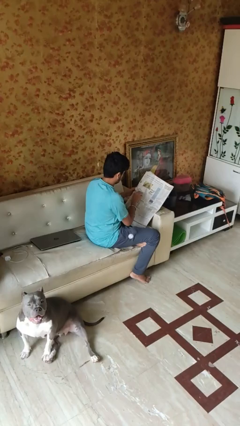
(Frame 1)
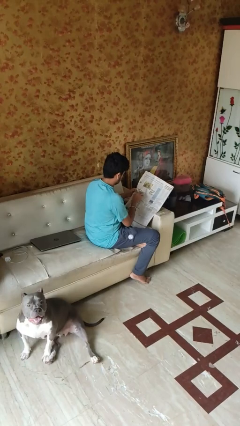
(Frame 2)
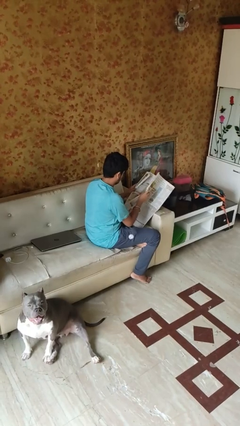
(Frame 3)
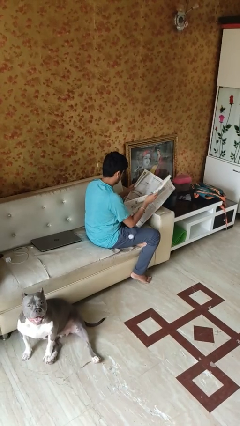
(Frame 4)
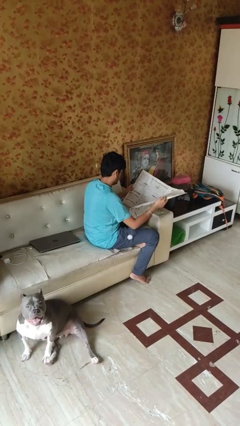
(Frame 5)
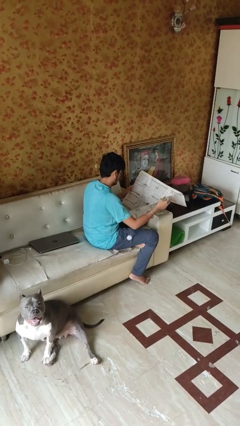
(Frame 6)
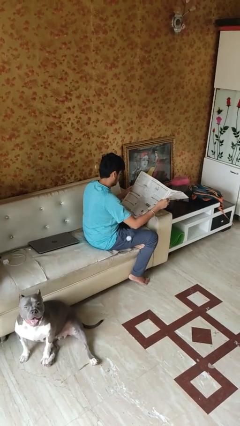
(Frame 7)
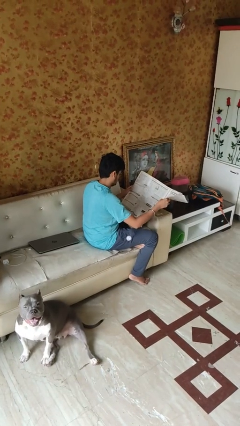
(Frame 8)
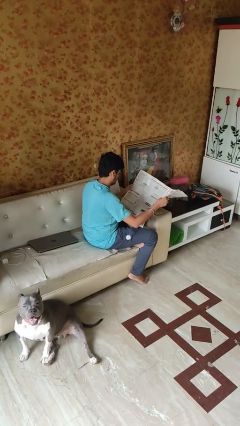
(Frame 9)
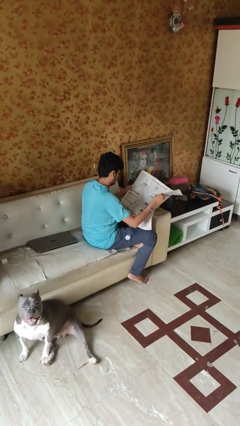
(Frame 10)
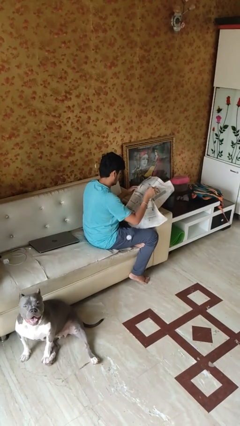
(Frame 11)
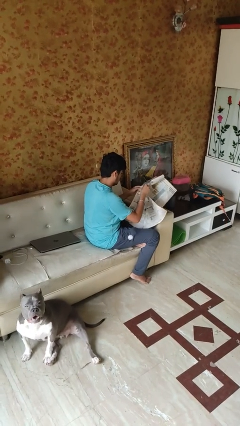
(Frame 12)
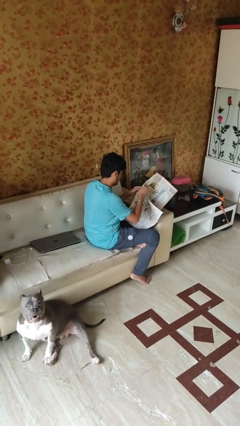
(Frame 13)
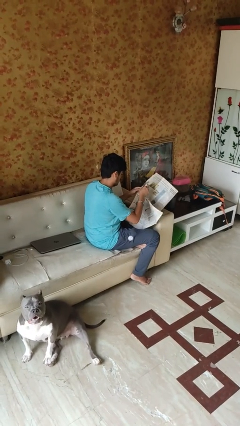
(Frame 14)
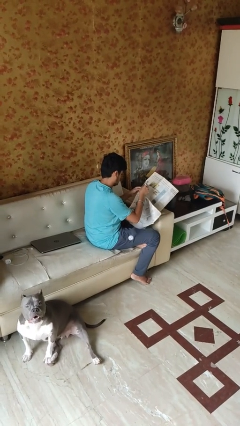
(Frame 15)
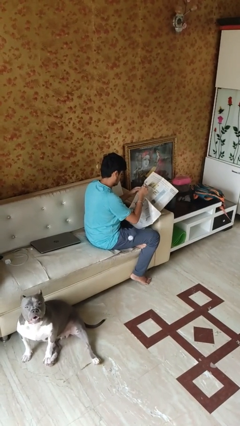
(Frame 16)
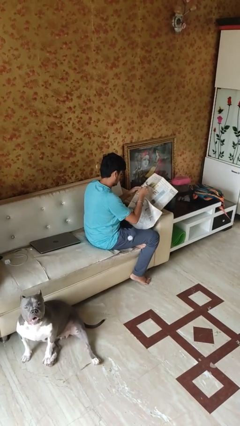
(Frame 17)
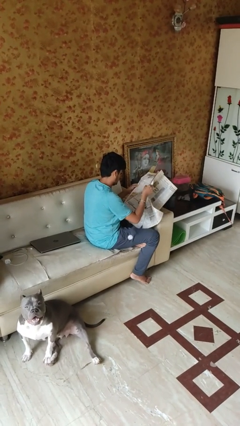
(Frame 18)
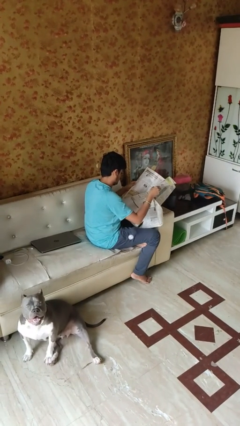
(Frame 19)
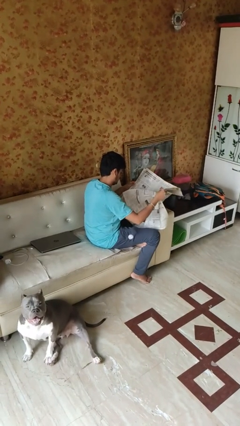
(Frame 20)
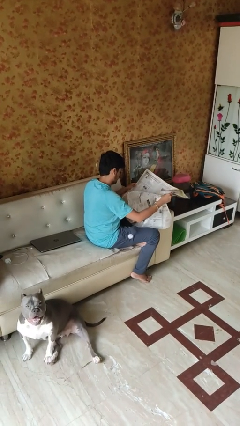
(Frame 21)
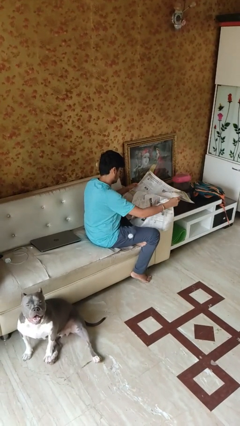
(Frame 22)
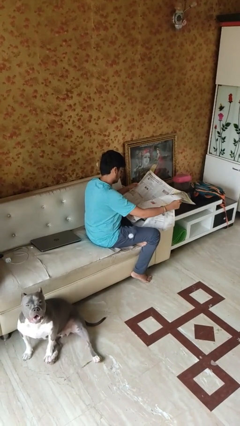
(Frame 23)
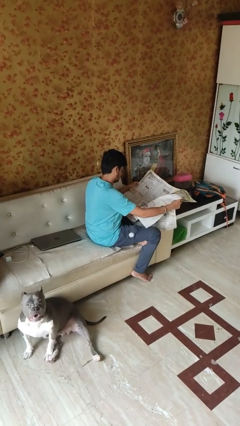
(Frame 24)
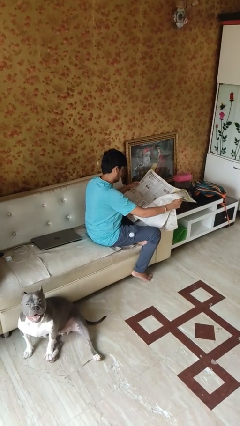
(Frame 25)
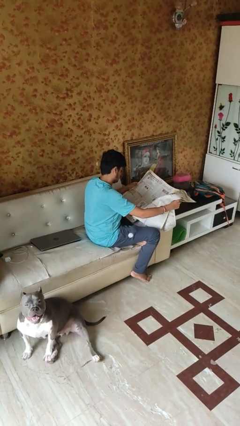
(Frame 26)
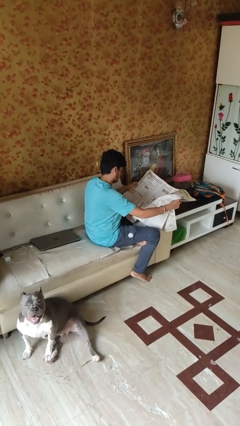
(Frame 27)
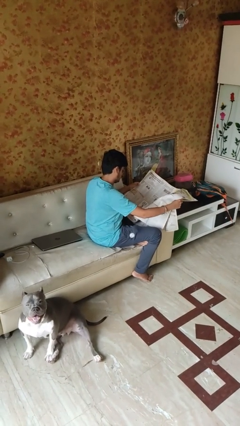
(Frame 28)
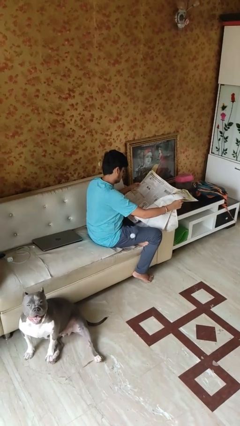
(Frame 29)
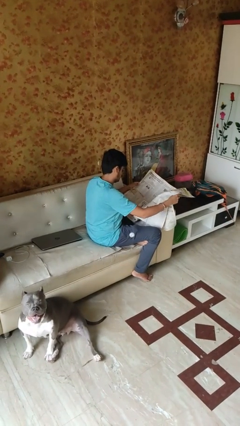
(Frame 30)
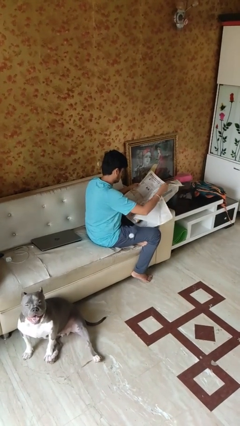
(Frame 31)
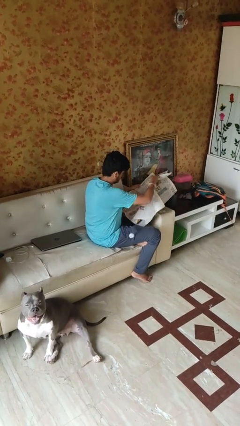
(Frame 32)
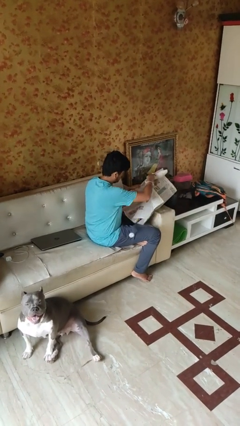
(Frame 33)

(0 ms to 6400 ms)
person reads newspaper

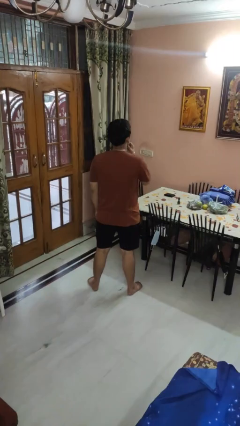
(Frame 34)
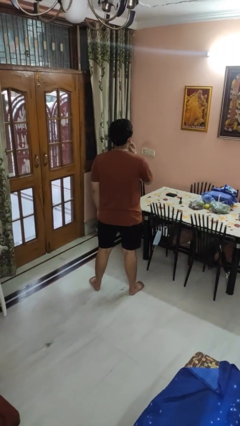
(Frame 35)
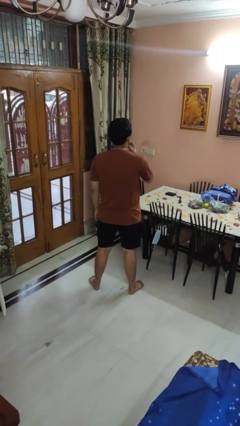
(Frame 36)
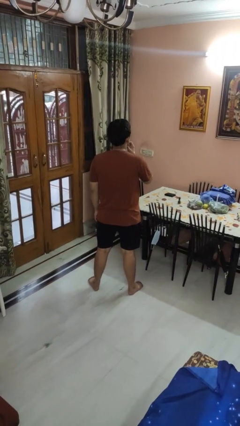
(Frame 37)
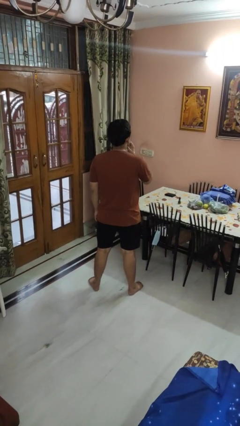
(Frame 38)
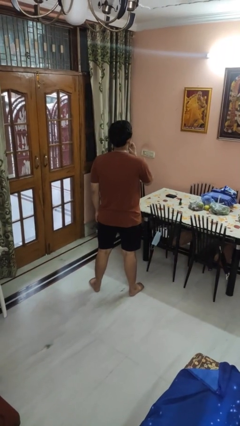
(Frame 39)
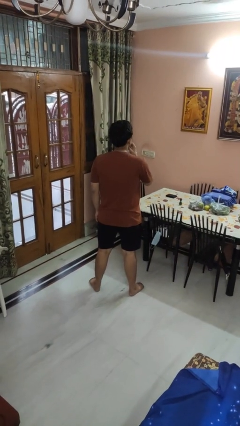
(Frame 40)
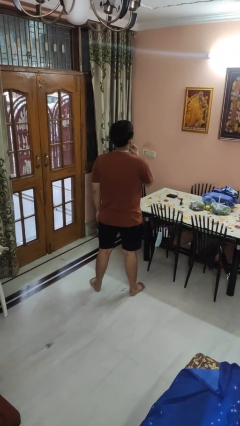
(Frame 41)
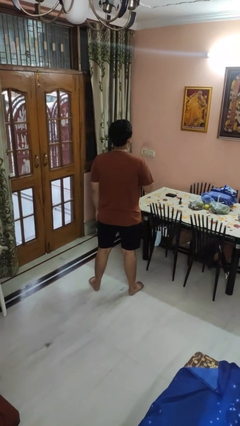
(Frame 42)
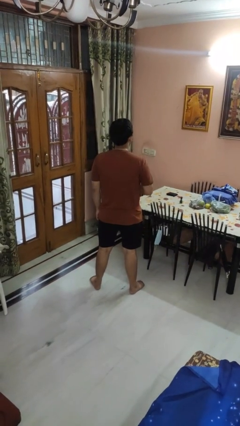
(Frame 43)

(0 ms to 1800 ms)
person strokes chin

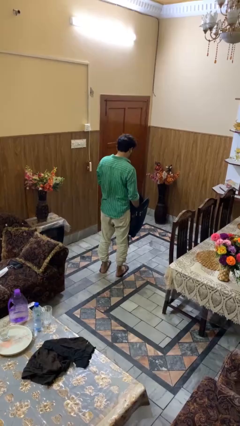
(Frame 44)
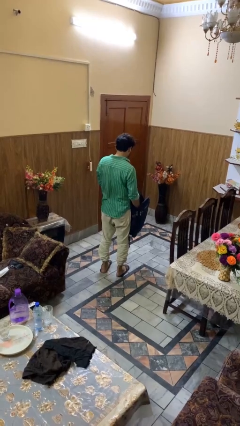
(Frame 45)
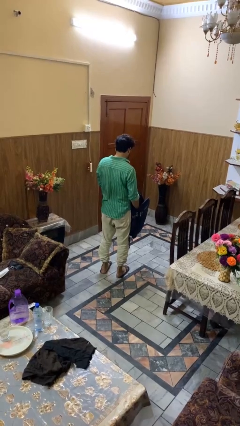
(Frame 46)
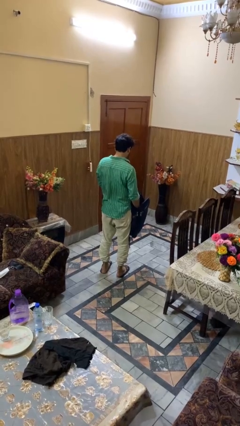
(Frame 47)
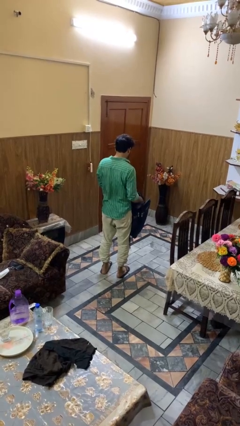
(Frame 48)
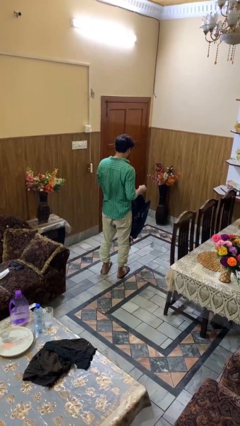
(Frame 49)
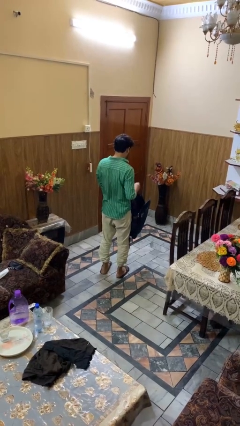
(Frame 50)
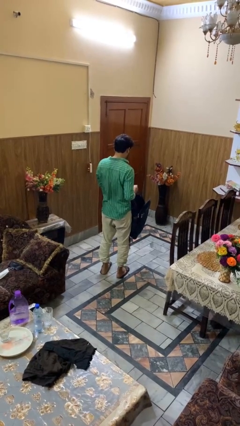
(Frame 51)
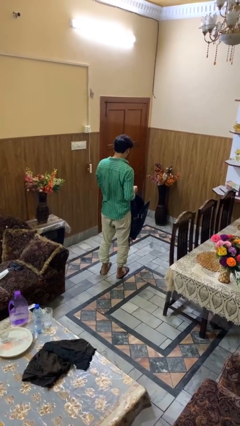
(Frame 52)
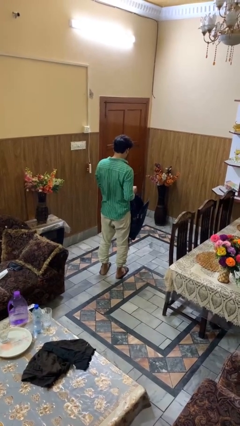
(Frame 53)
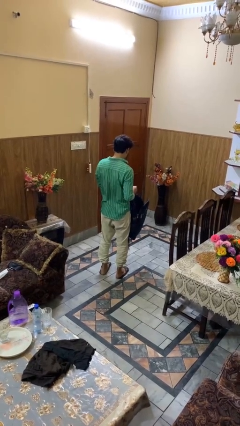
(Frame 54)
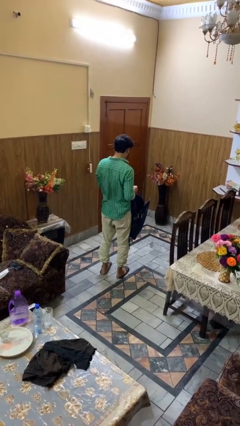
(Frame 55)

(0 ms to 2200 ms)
person takes object from backpack

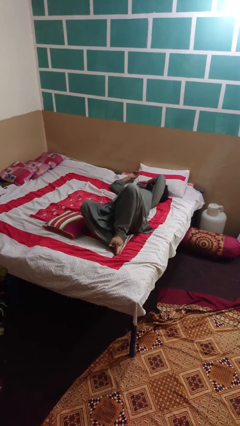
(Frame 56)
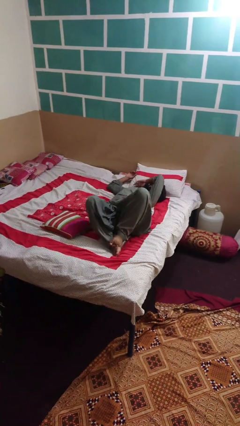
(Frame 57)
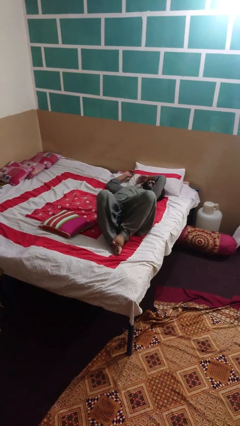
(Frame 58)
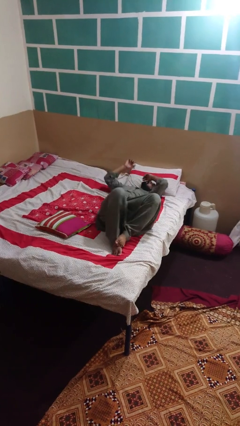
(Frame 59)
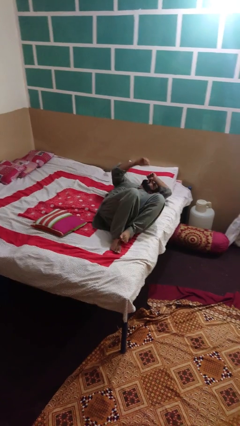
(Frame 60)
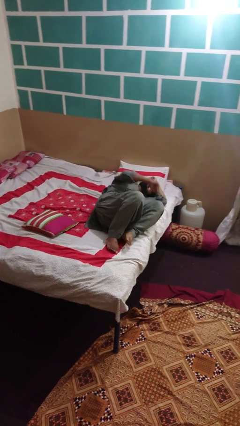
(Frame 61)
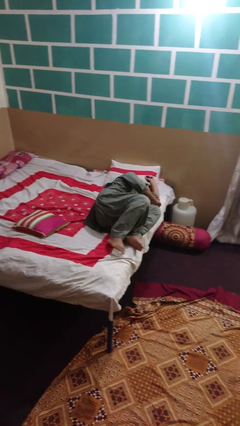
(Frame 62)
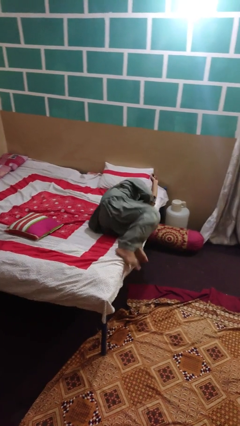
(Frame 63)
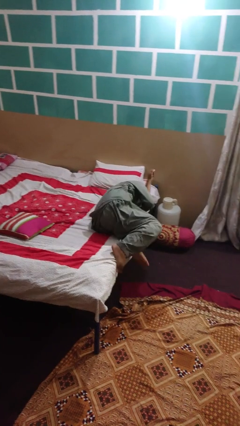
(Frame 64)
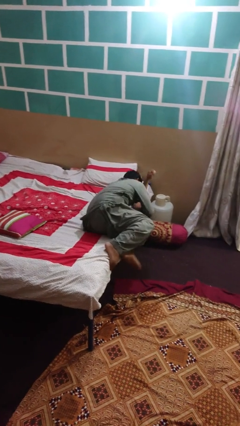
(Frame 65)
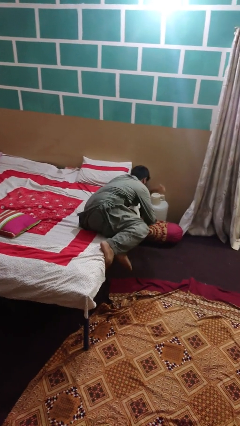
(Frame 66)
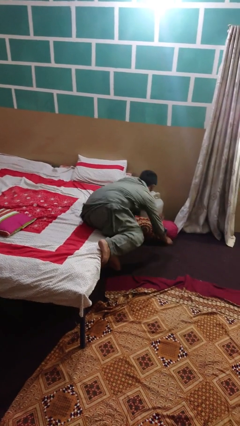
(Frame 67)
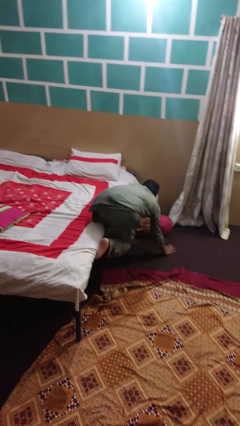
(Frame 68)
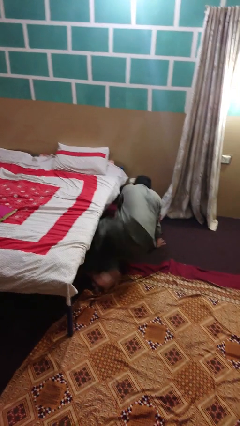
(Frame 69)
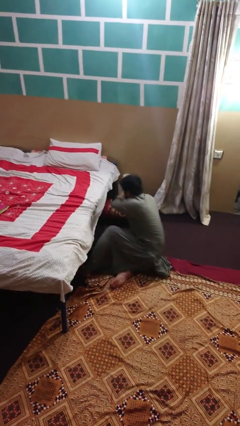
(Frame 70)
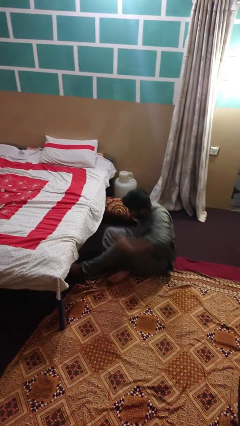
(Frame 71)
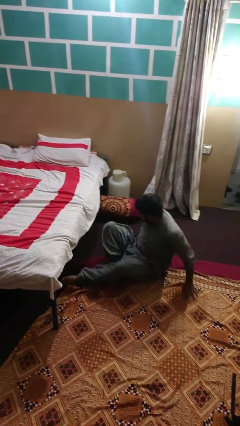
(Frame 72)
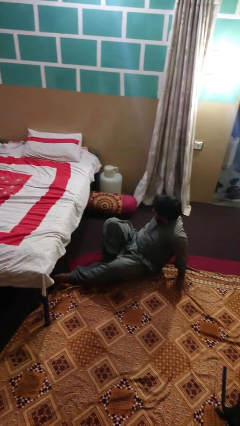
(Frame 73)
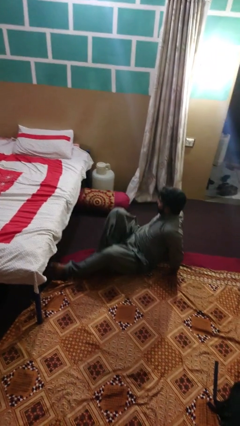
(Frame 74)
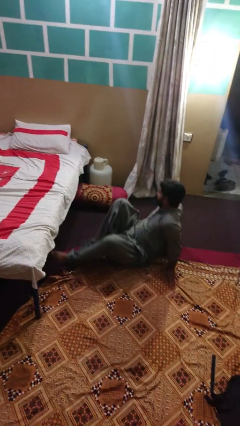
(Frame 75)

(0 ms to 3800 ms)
person falls from bed

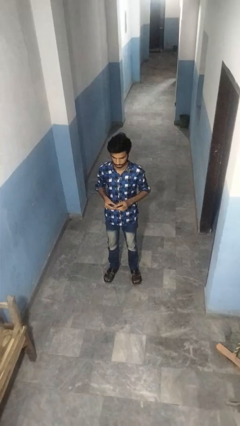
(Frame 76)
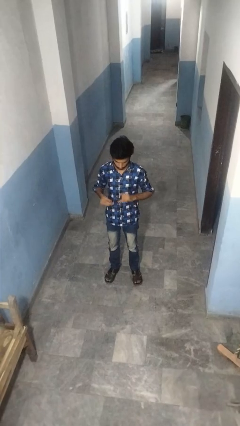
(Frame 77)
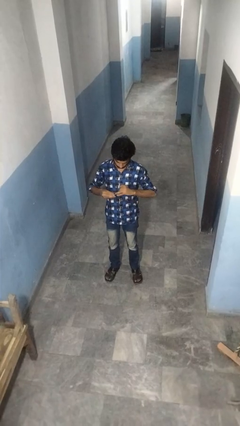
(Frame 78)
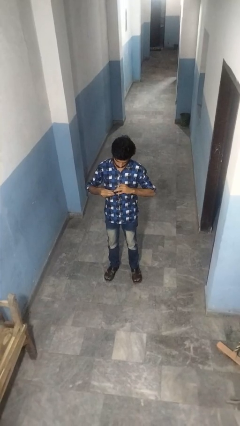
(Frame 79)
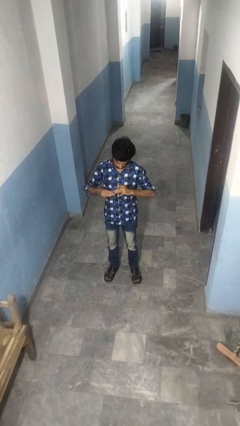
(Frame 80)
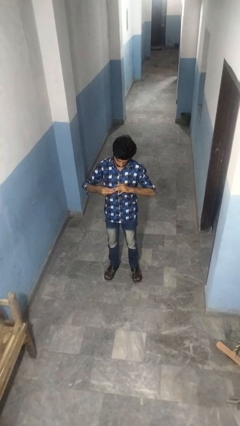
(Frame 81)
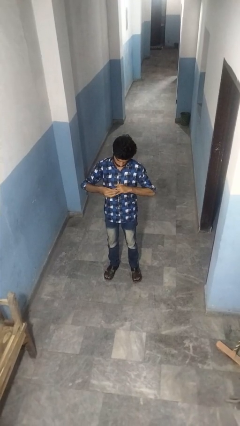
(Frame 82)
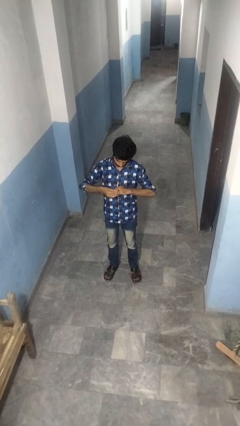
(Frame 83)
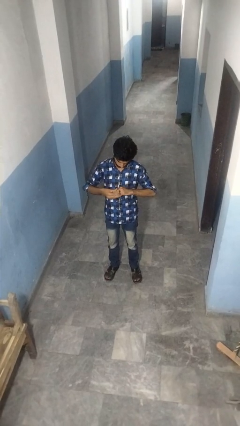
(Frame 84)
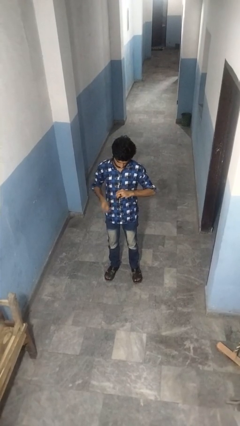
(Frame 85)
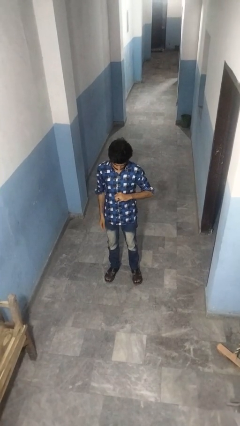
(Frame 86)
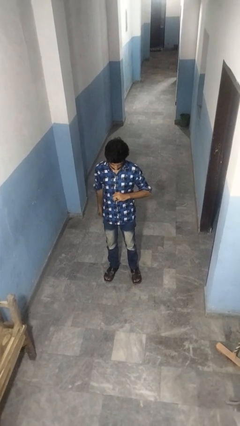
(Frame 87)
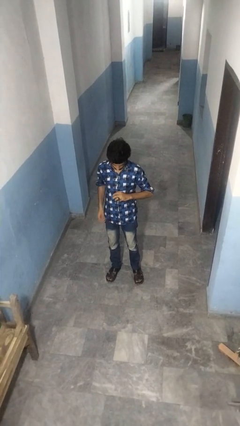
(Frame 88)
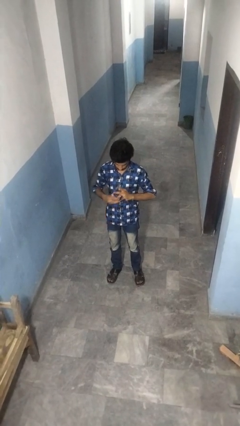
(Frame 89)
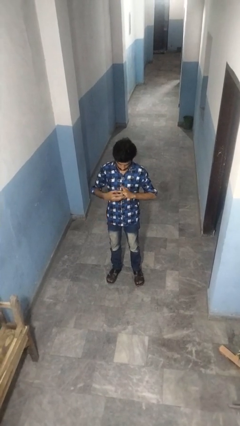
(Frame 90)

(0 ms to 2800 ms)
person puts on ring

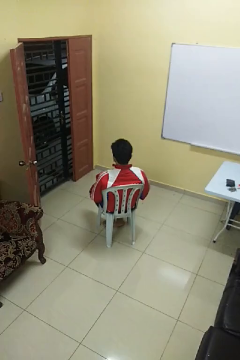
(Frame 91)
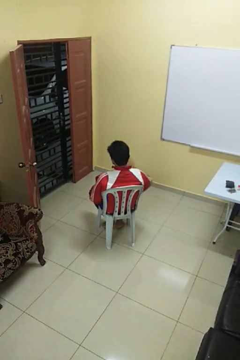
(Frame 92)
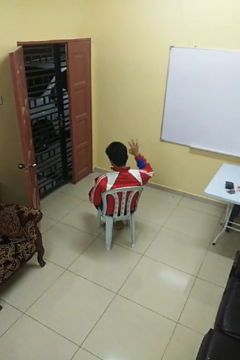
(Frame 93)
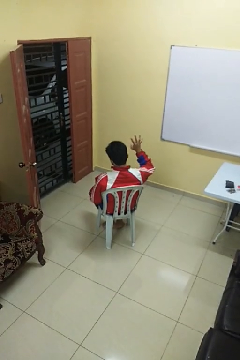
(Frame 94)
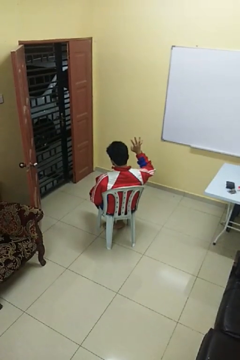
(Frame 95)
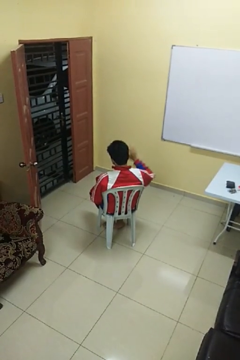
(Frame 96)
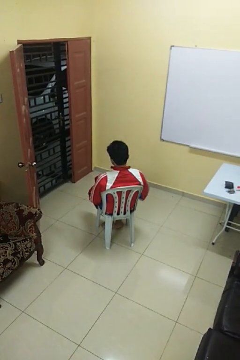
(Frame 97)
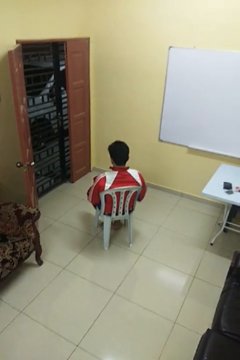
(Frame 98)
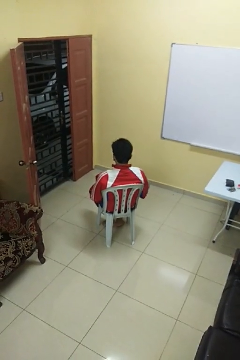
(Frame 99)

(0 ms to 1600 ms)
person gestures number four
